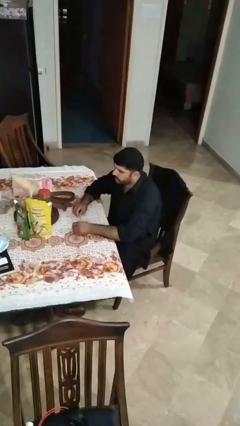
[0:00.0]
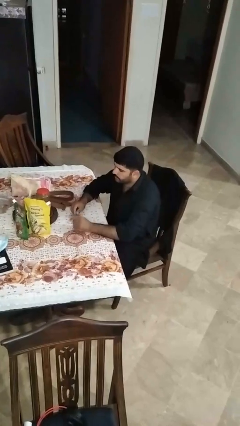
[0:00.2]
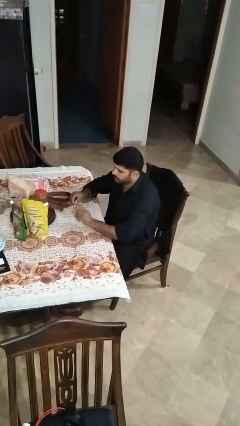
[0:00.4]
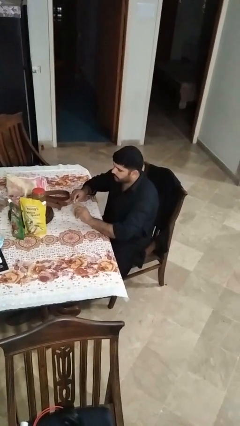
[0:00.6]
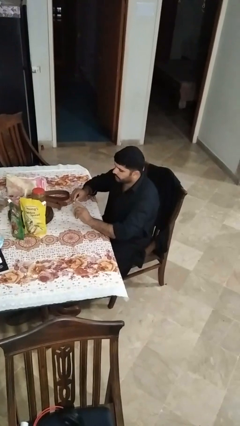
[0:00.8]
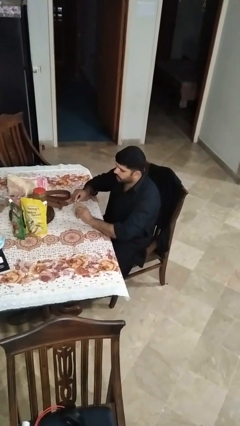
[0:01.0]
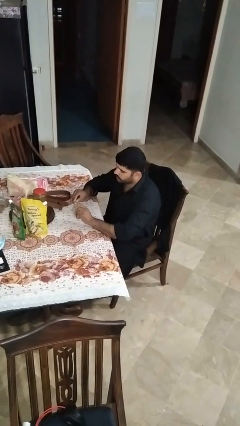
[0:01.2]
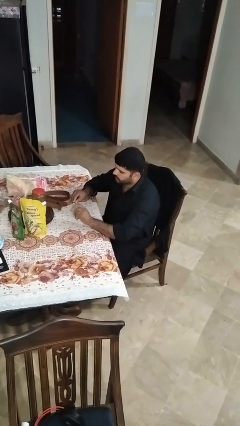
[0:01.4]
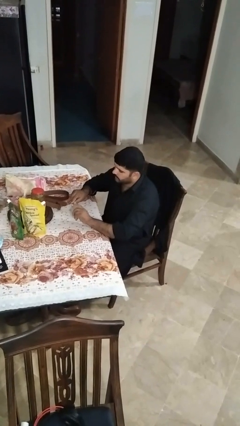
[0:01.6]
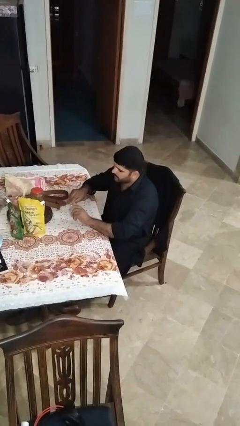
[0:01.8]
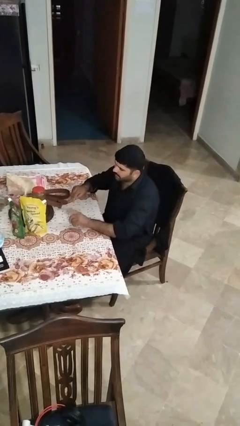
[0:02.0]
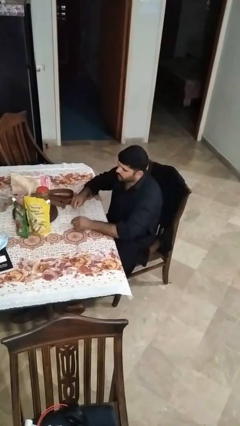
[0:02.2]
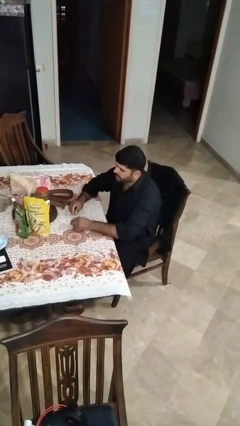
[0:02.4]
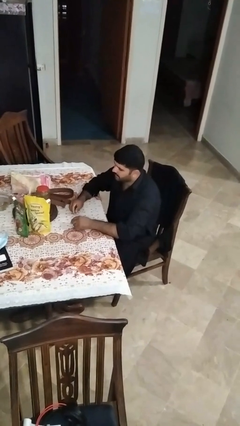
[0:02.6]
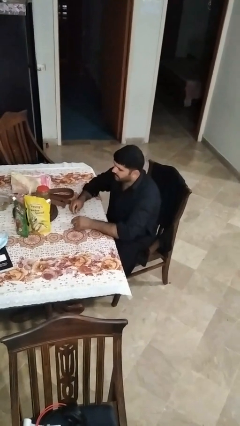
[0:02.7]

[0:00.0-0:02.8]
person files fingernails

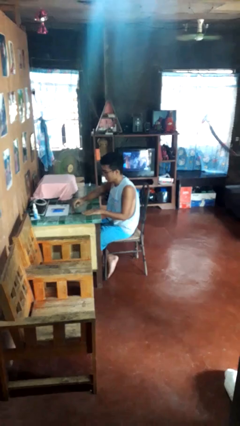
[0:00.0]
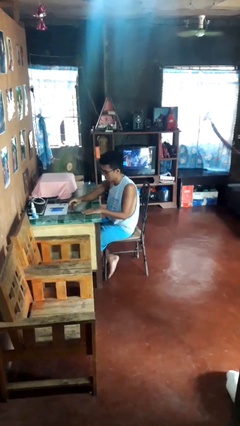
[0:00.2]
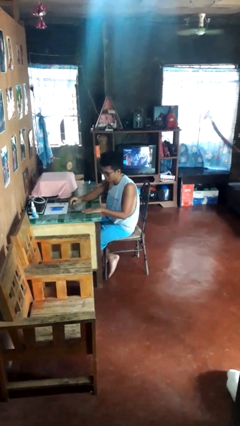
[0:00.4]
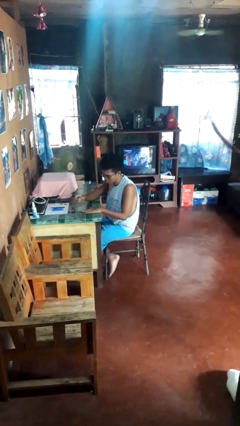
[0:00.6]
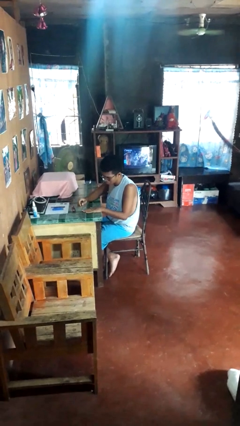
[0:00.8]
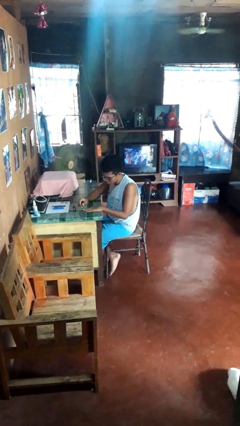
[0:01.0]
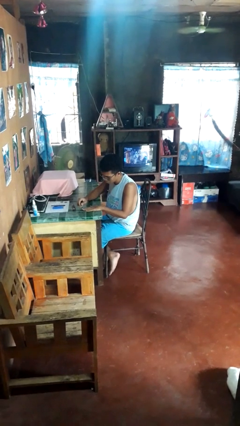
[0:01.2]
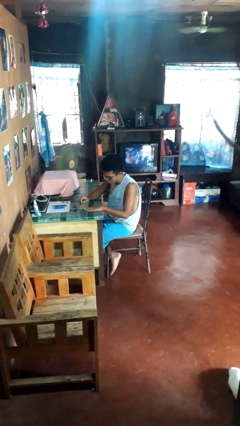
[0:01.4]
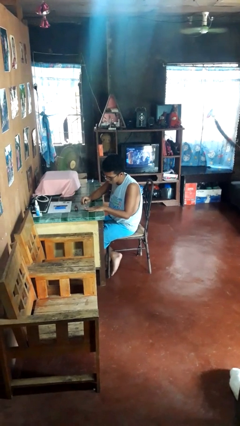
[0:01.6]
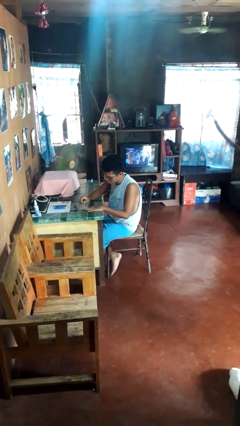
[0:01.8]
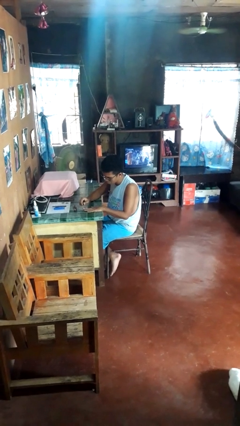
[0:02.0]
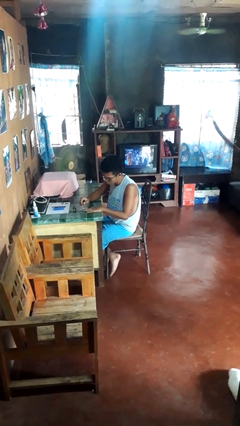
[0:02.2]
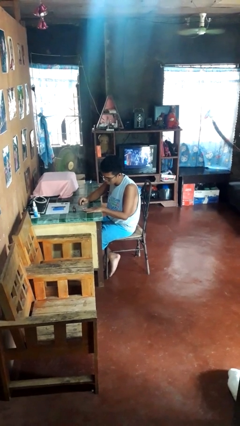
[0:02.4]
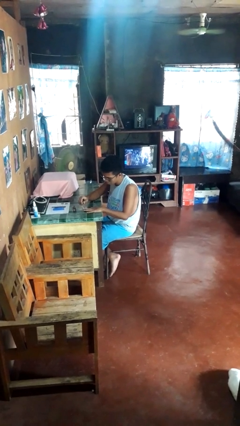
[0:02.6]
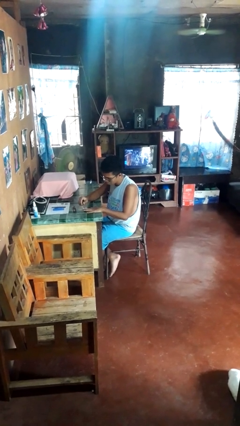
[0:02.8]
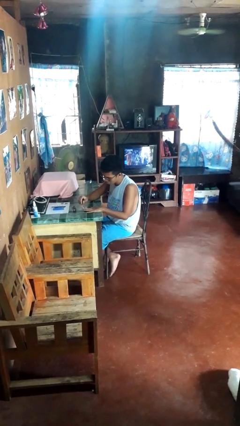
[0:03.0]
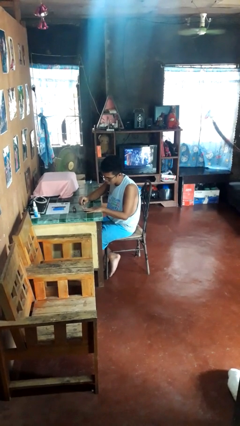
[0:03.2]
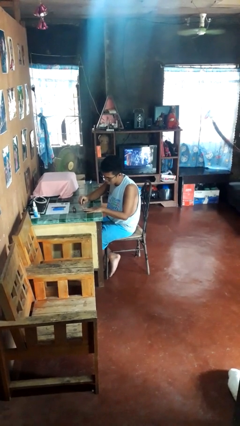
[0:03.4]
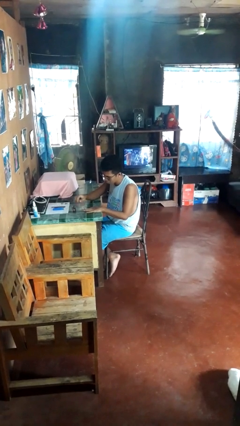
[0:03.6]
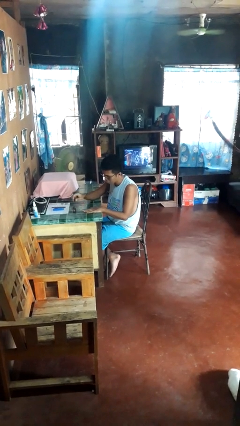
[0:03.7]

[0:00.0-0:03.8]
person paints fingernails

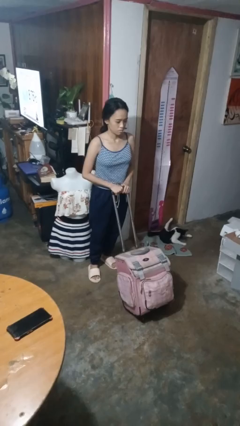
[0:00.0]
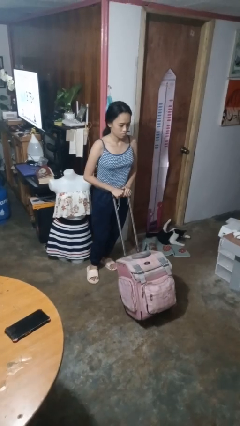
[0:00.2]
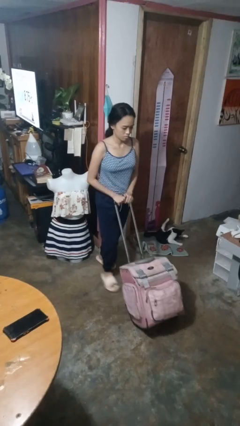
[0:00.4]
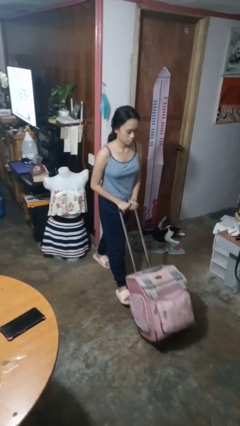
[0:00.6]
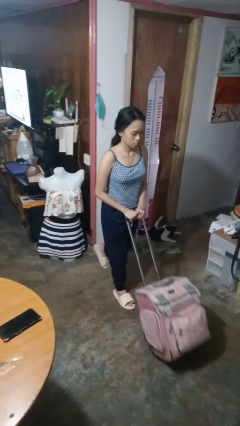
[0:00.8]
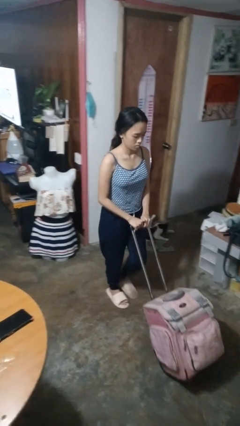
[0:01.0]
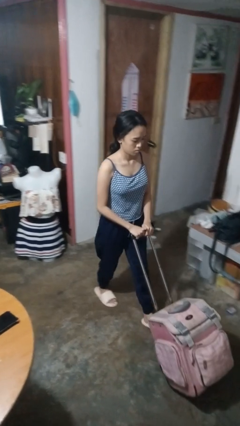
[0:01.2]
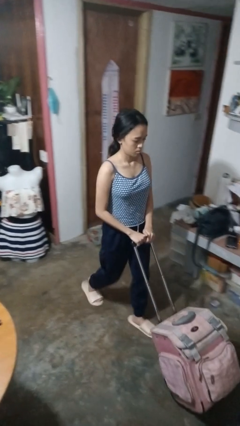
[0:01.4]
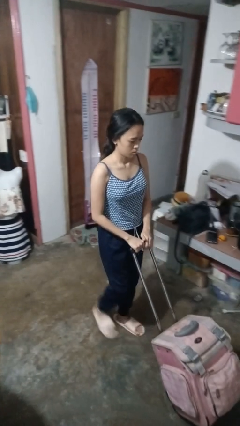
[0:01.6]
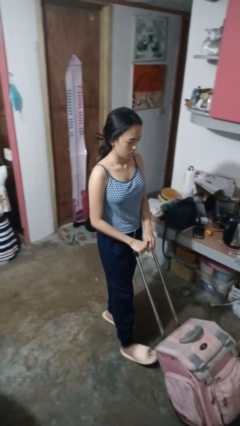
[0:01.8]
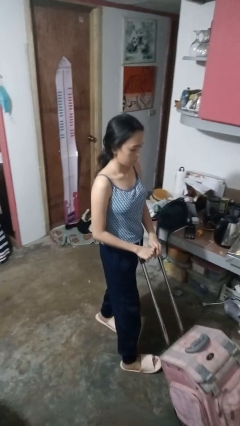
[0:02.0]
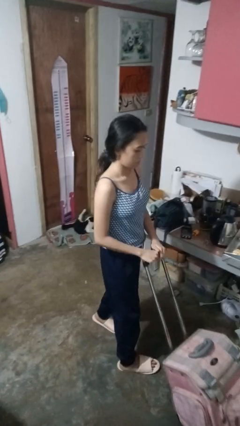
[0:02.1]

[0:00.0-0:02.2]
person pushes wheeled cart

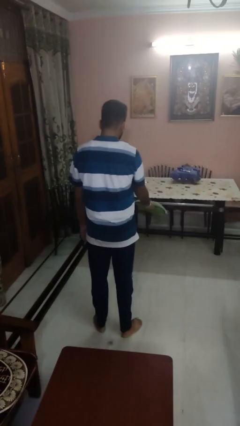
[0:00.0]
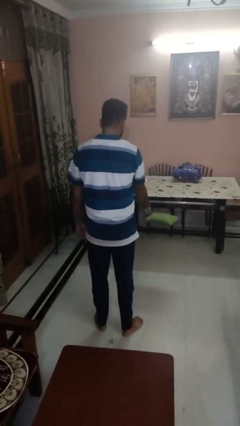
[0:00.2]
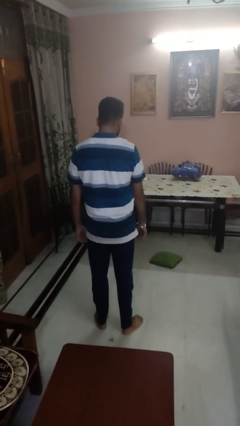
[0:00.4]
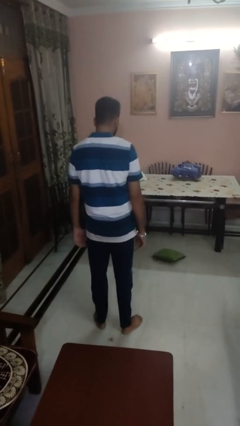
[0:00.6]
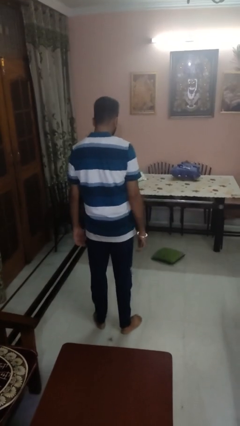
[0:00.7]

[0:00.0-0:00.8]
person throws object to ground

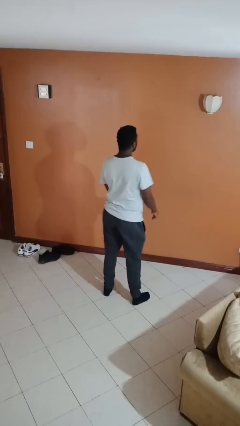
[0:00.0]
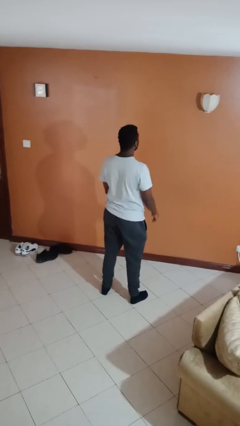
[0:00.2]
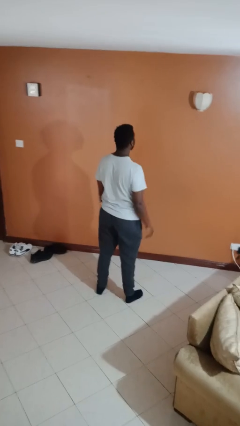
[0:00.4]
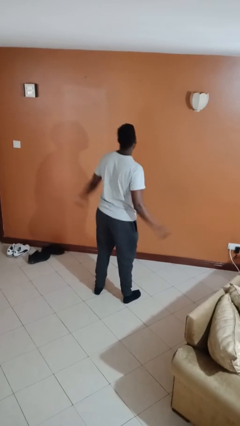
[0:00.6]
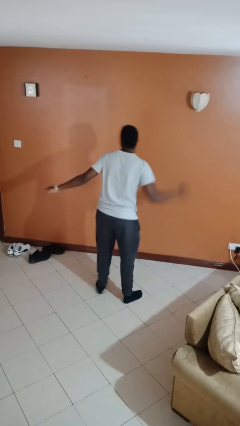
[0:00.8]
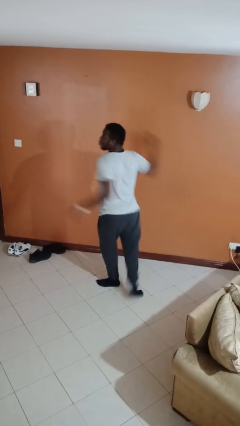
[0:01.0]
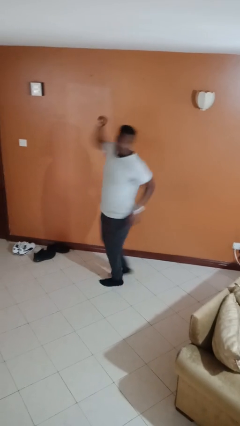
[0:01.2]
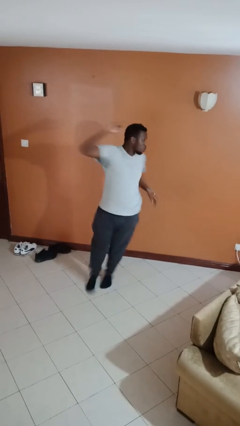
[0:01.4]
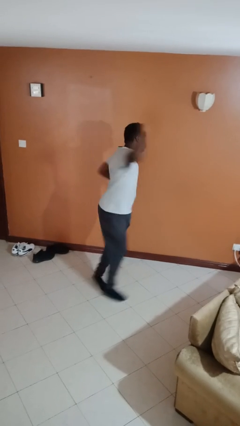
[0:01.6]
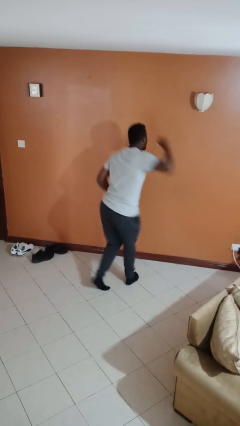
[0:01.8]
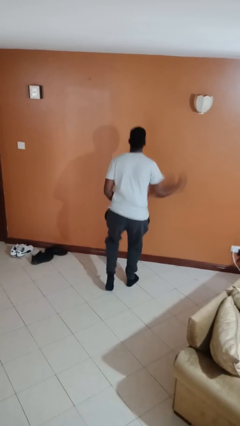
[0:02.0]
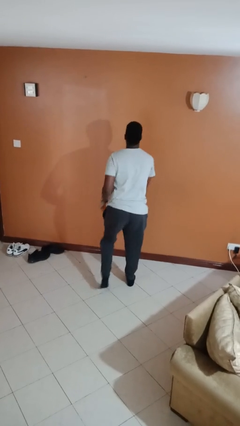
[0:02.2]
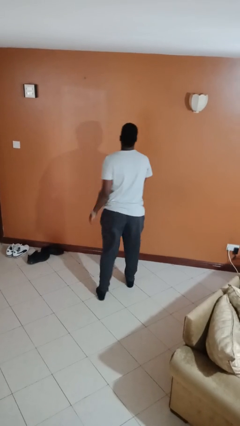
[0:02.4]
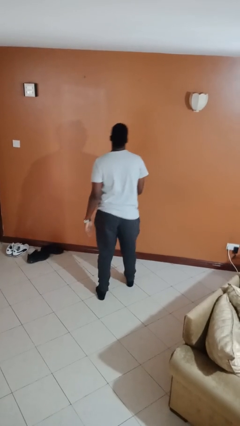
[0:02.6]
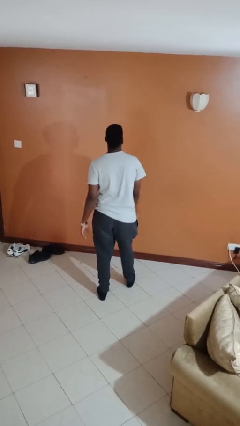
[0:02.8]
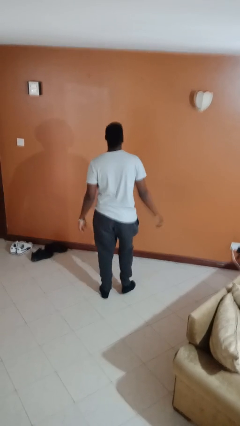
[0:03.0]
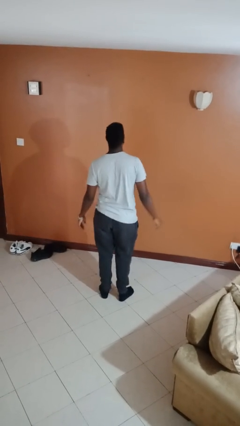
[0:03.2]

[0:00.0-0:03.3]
person twirls

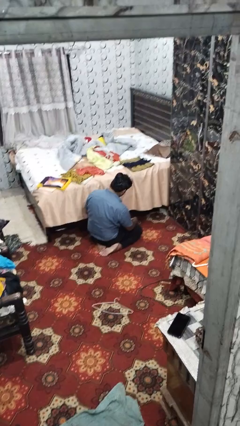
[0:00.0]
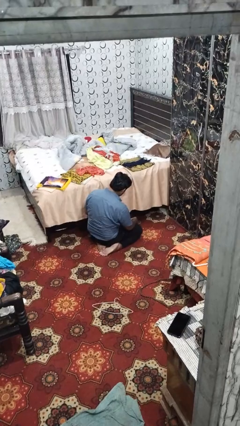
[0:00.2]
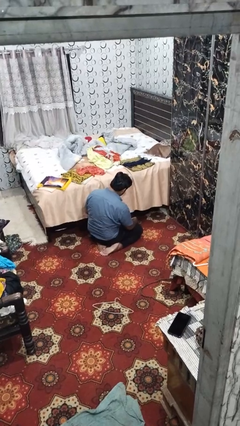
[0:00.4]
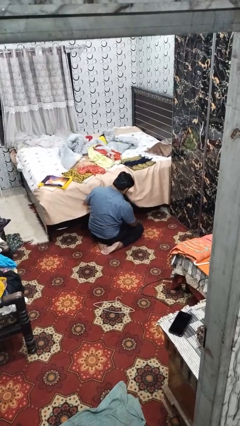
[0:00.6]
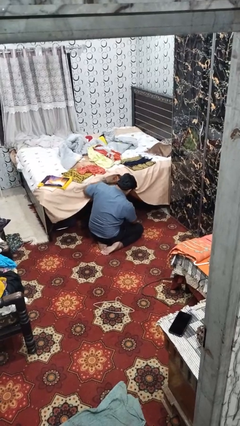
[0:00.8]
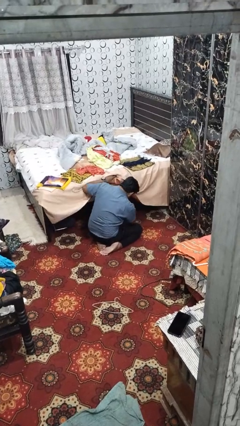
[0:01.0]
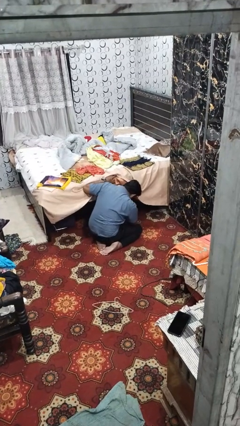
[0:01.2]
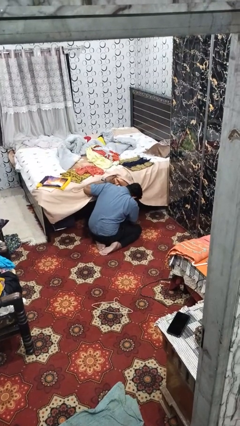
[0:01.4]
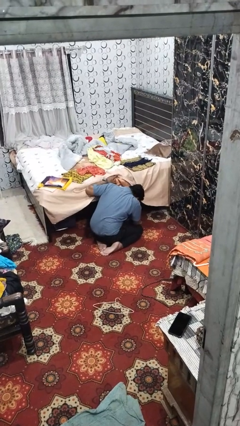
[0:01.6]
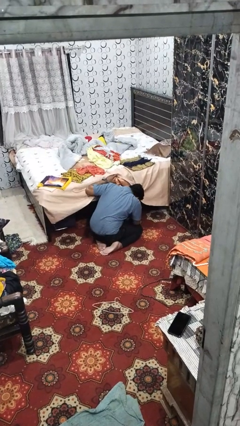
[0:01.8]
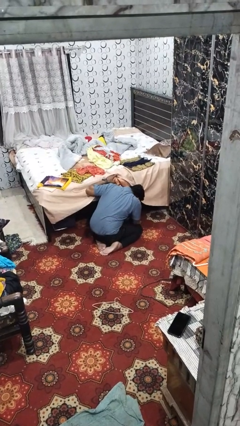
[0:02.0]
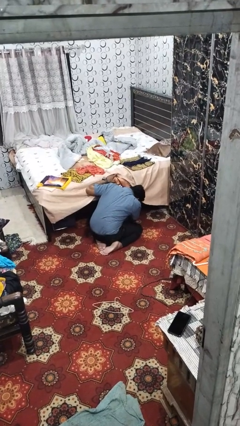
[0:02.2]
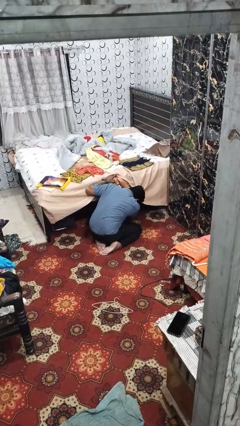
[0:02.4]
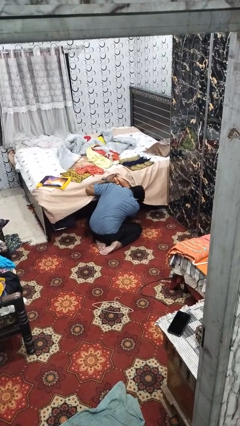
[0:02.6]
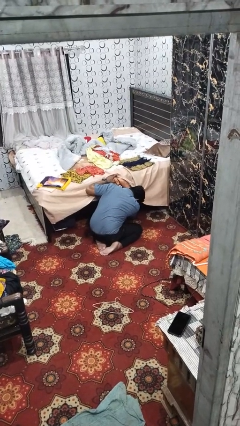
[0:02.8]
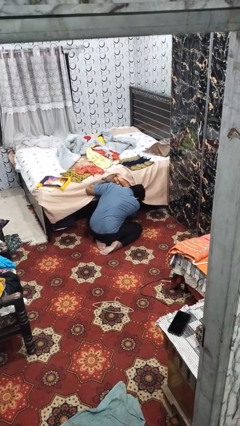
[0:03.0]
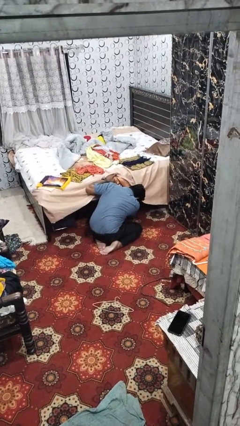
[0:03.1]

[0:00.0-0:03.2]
person searches under bed

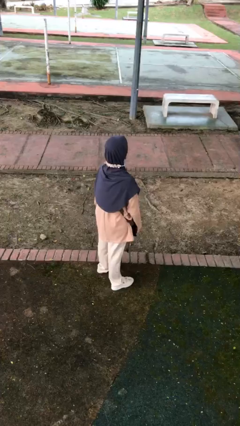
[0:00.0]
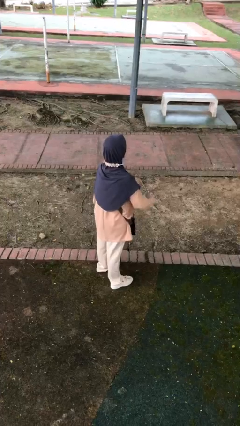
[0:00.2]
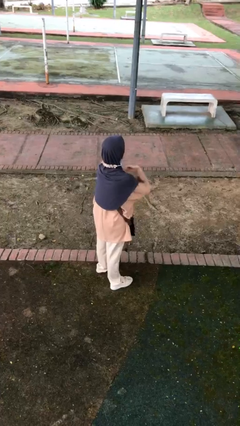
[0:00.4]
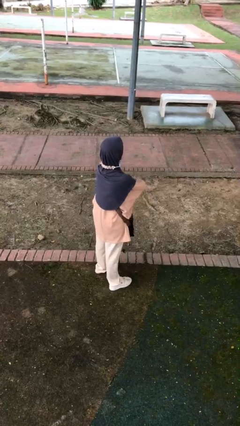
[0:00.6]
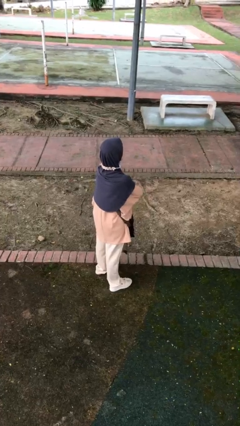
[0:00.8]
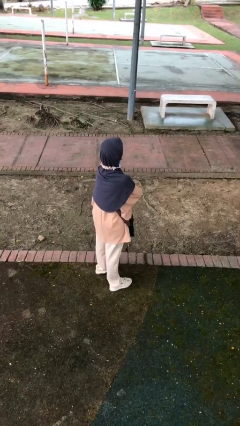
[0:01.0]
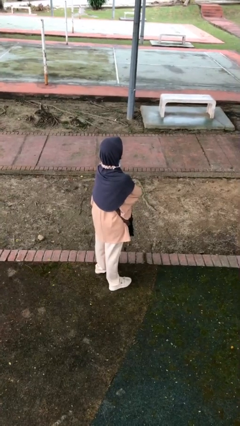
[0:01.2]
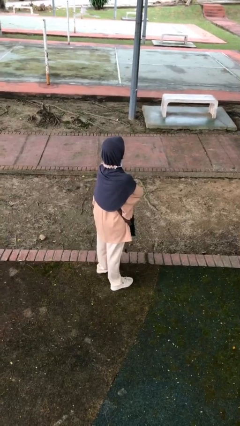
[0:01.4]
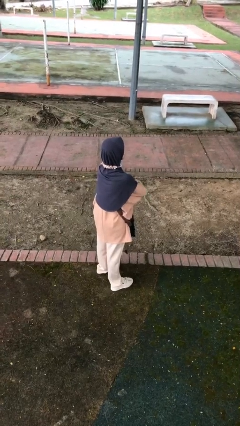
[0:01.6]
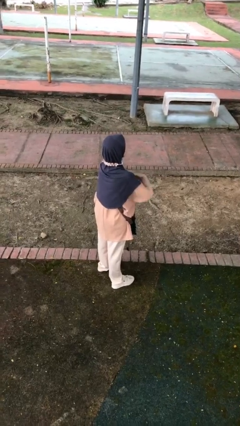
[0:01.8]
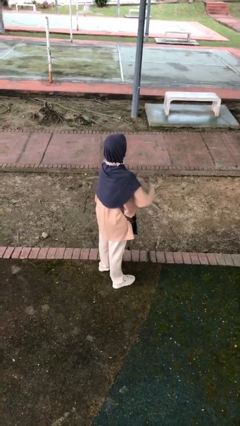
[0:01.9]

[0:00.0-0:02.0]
person crosses arms
